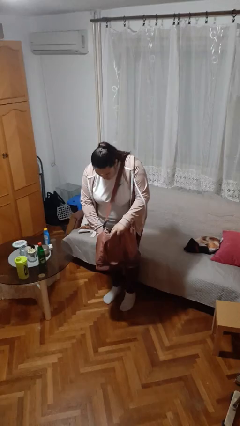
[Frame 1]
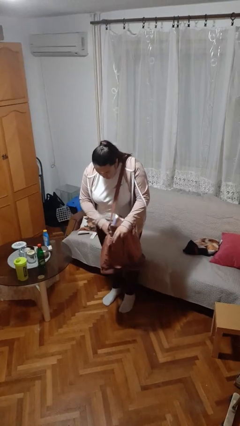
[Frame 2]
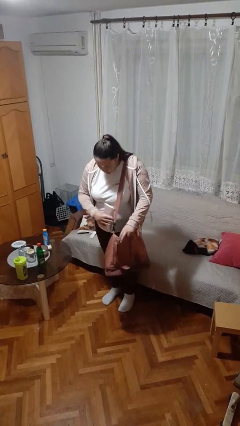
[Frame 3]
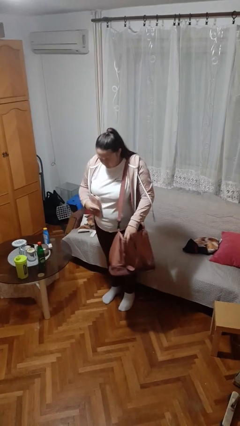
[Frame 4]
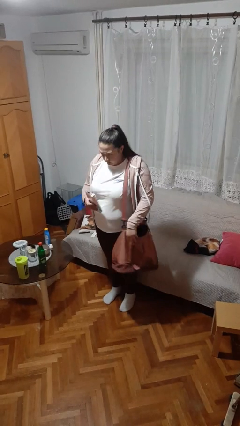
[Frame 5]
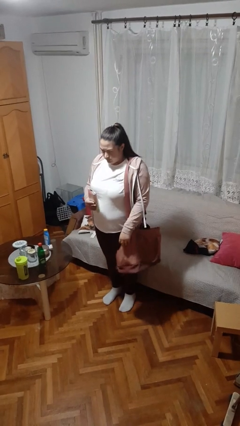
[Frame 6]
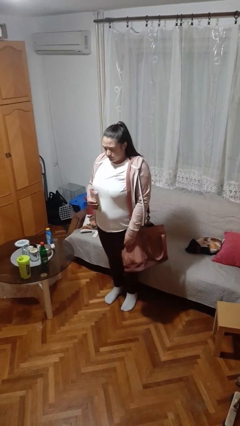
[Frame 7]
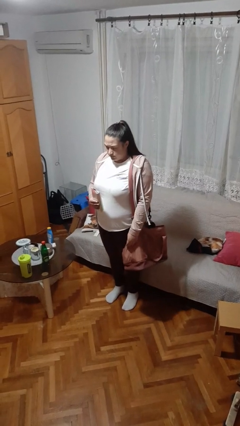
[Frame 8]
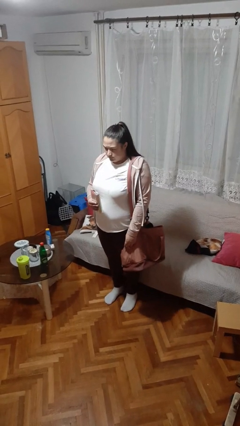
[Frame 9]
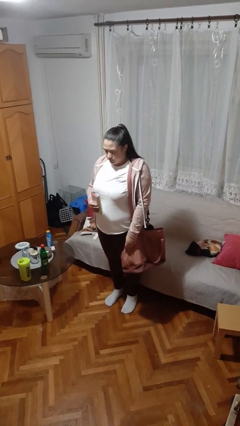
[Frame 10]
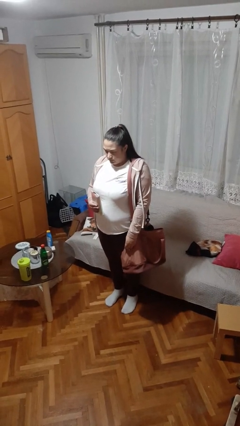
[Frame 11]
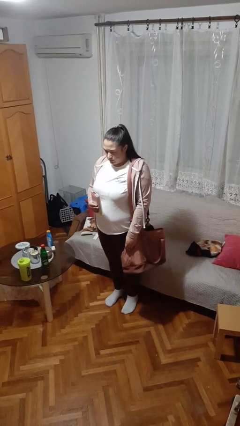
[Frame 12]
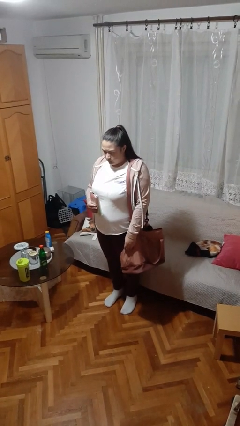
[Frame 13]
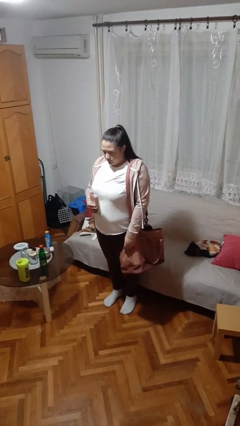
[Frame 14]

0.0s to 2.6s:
person takes object from purse

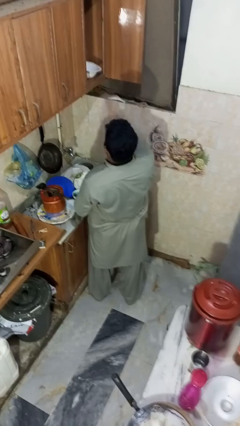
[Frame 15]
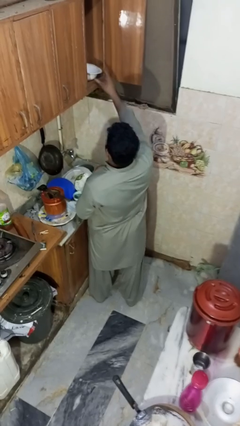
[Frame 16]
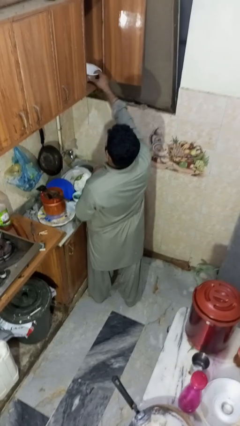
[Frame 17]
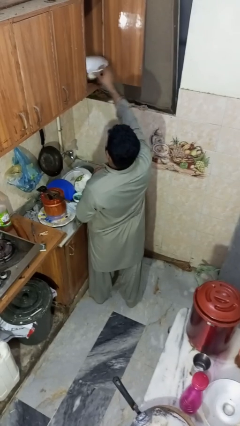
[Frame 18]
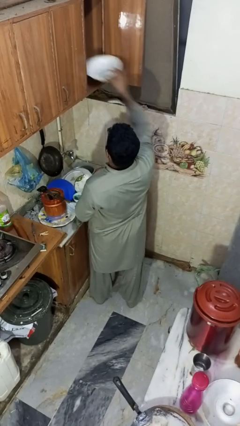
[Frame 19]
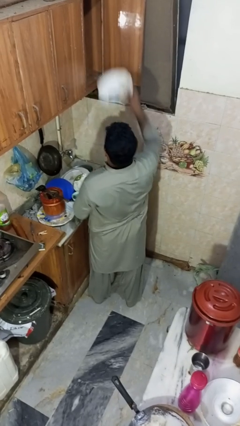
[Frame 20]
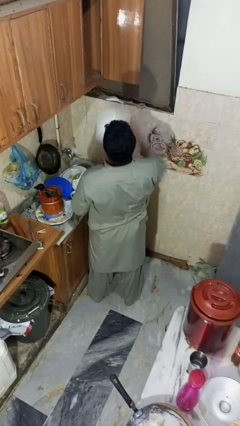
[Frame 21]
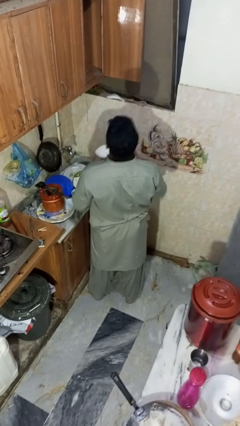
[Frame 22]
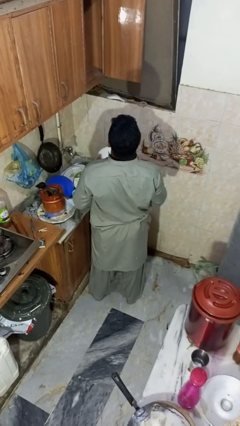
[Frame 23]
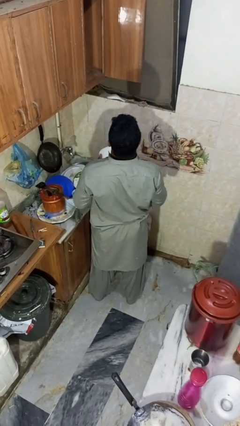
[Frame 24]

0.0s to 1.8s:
person takes object from cabinet

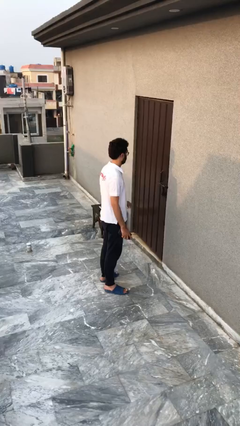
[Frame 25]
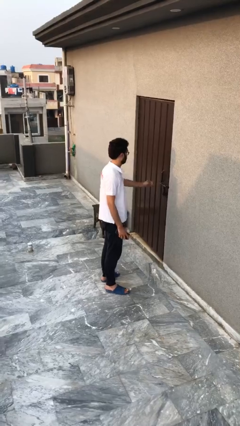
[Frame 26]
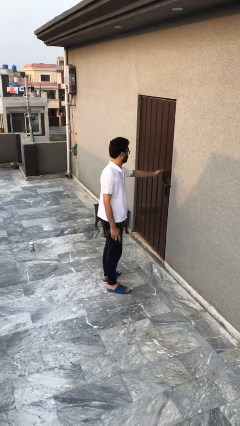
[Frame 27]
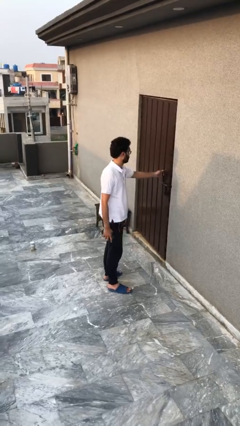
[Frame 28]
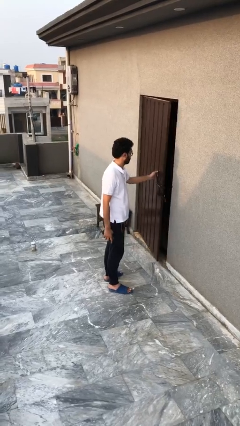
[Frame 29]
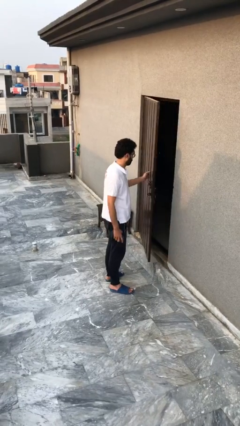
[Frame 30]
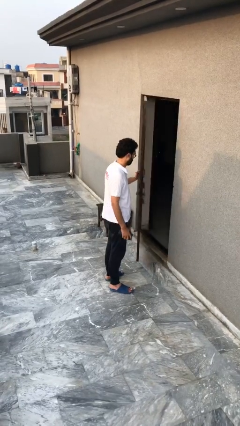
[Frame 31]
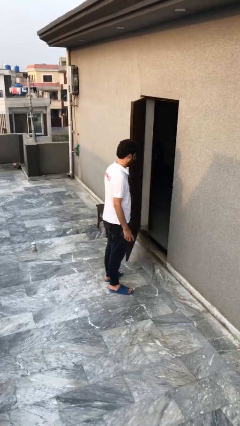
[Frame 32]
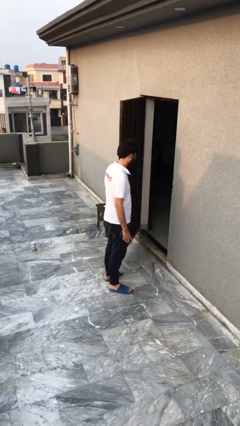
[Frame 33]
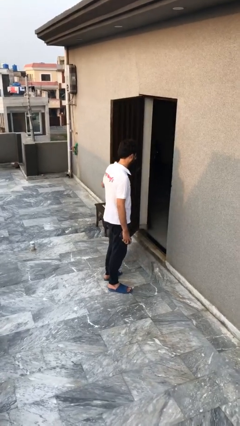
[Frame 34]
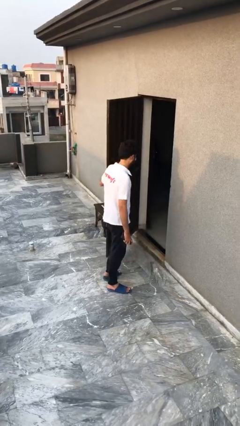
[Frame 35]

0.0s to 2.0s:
person opens facility door

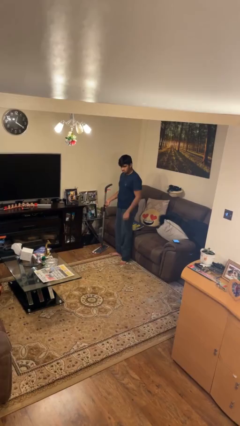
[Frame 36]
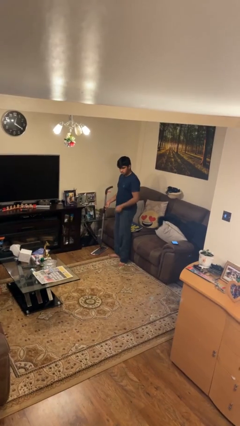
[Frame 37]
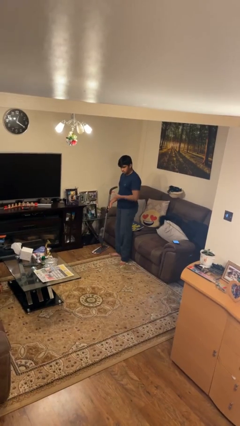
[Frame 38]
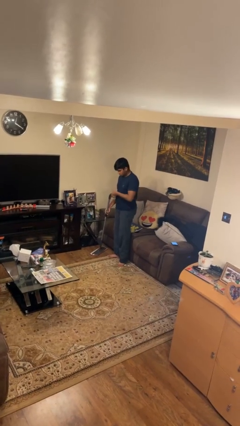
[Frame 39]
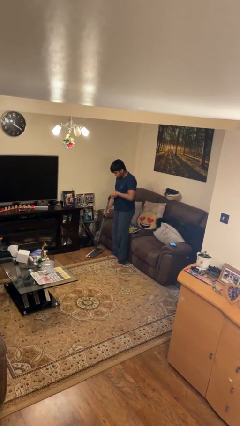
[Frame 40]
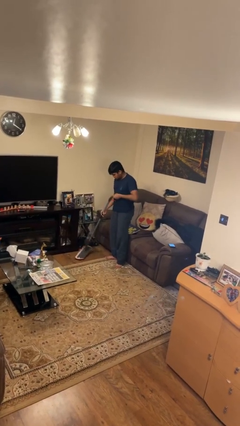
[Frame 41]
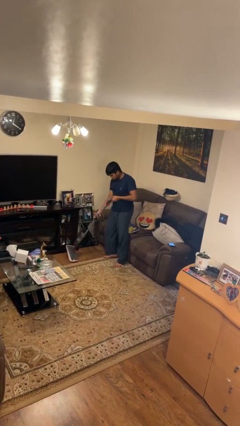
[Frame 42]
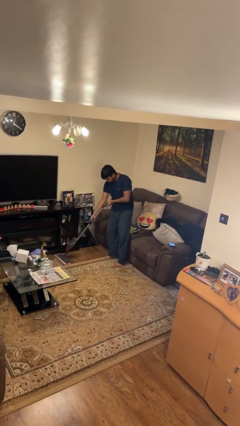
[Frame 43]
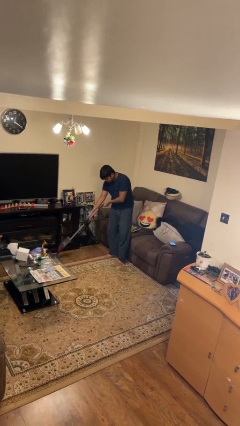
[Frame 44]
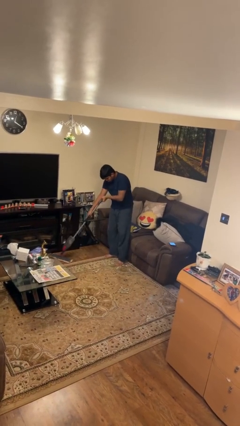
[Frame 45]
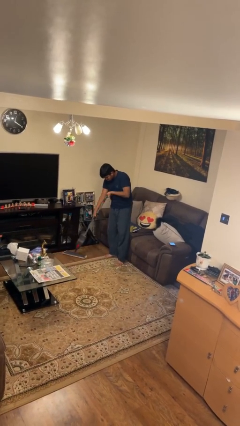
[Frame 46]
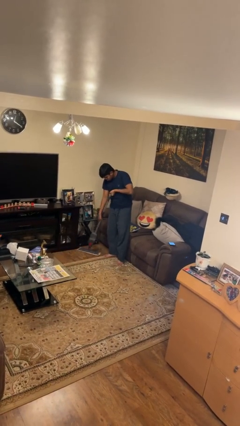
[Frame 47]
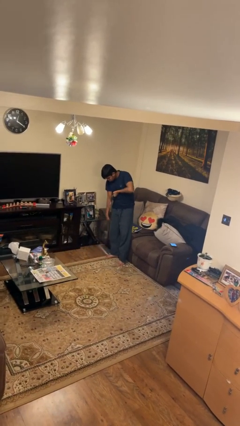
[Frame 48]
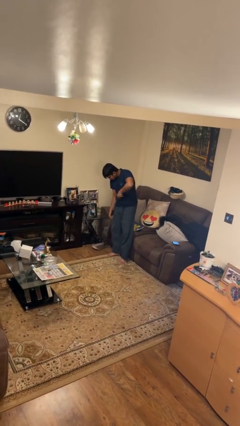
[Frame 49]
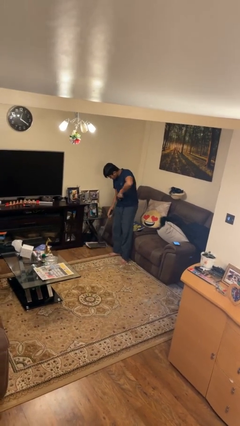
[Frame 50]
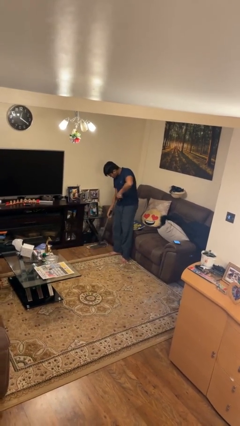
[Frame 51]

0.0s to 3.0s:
person mops

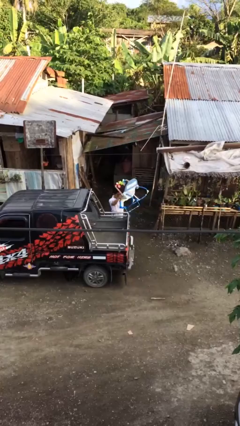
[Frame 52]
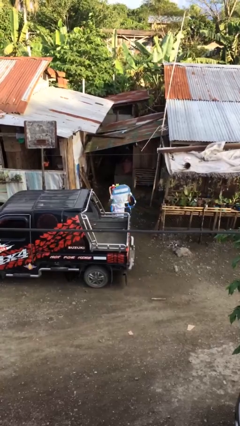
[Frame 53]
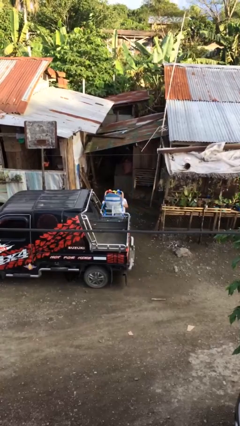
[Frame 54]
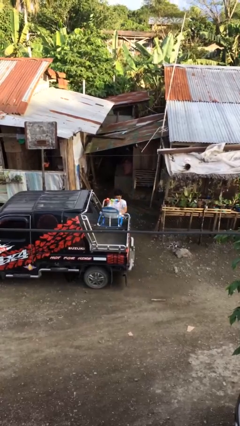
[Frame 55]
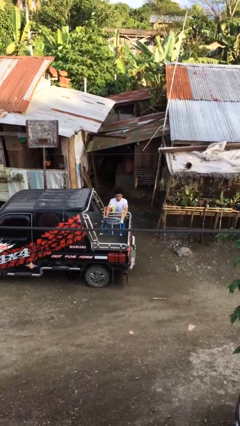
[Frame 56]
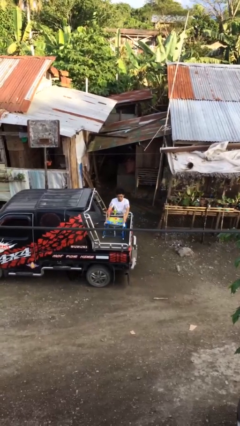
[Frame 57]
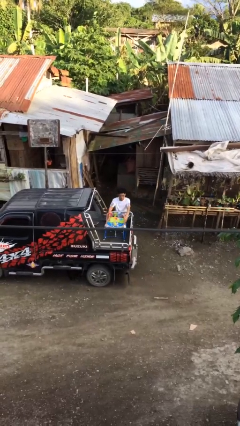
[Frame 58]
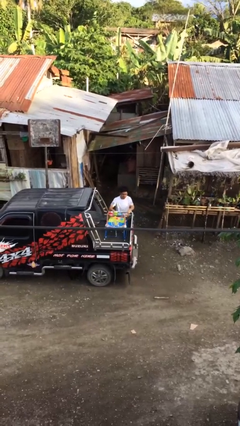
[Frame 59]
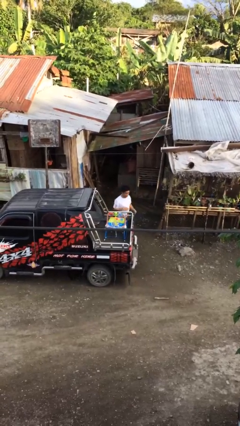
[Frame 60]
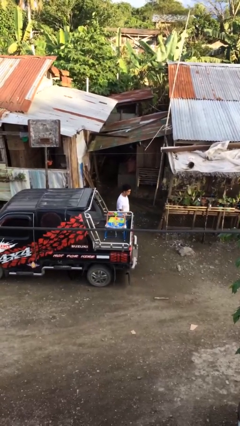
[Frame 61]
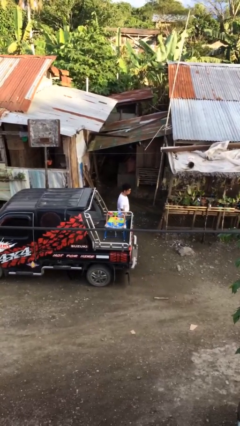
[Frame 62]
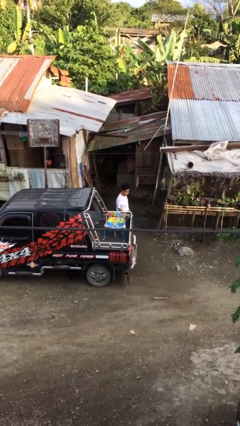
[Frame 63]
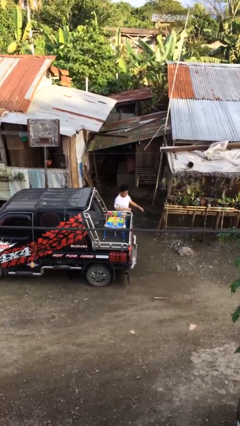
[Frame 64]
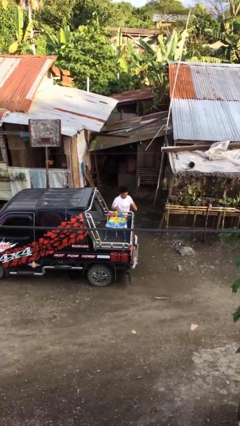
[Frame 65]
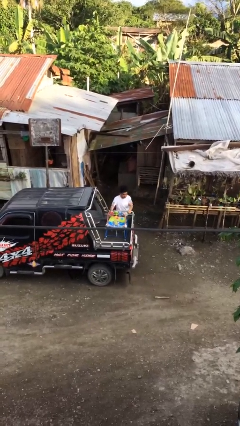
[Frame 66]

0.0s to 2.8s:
person loads car

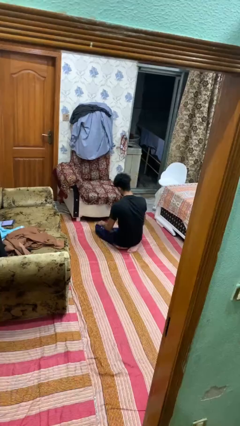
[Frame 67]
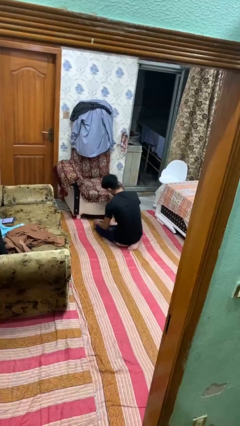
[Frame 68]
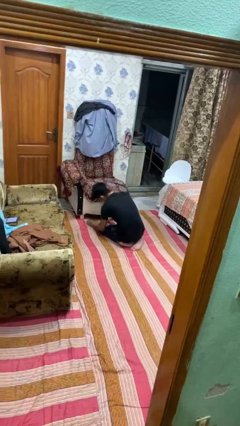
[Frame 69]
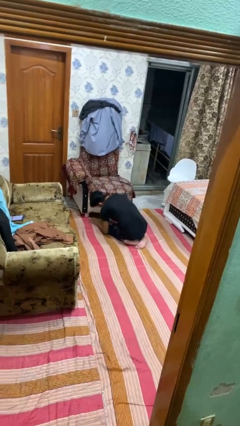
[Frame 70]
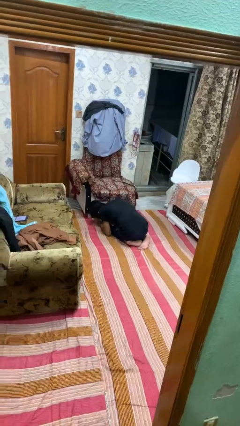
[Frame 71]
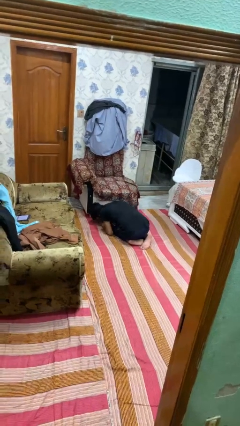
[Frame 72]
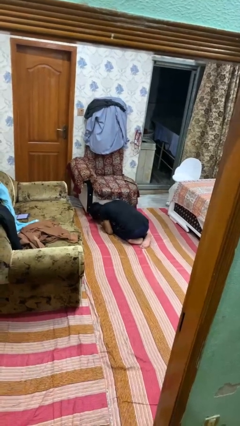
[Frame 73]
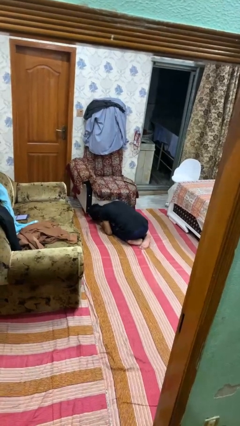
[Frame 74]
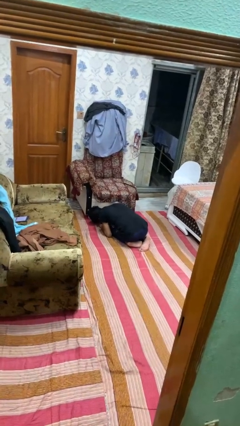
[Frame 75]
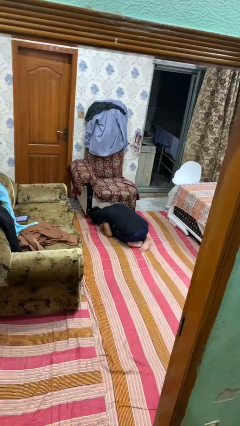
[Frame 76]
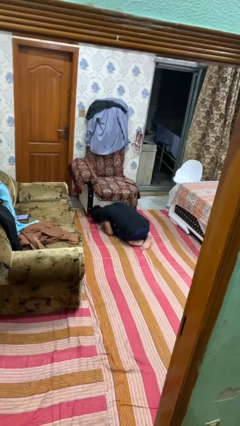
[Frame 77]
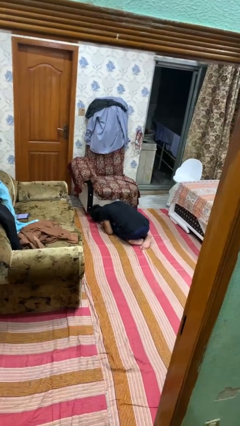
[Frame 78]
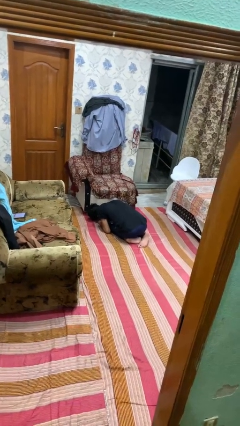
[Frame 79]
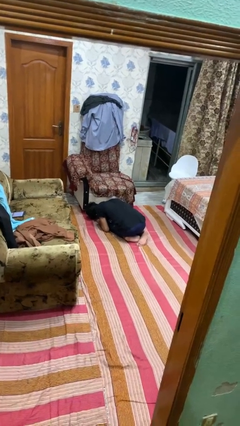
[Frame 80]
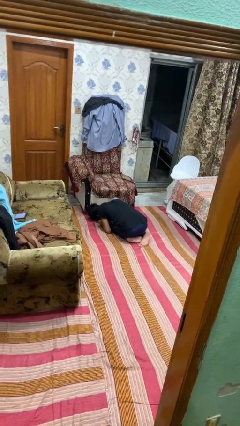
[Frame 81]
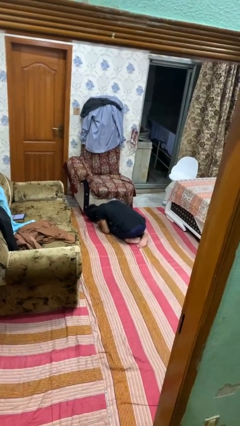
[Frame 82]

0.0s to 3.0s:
person searches under couch

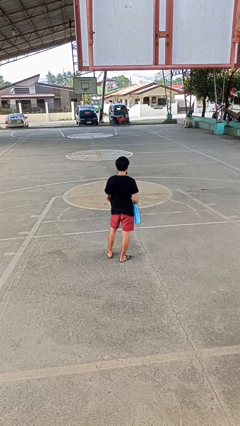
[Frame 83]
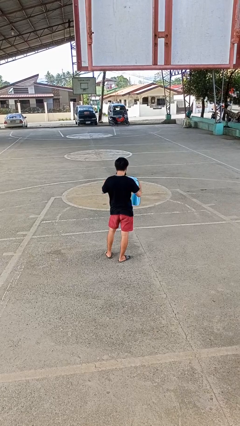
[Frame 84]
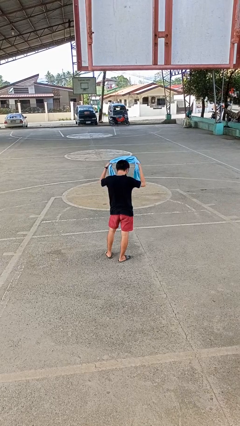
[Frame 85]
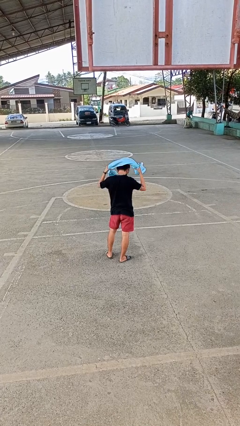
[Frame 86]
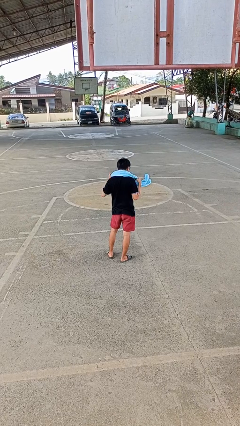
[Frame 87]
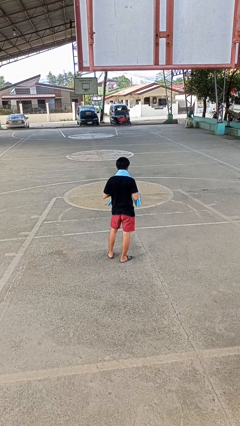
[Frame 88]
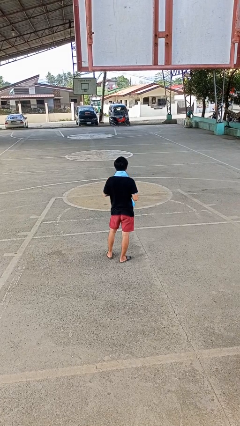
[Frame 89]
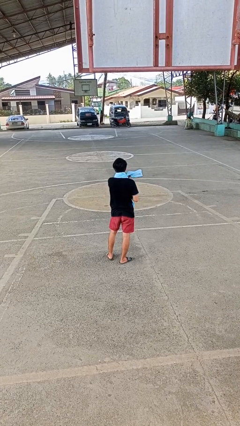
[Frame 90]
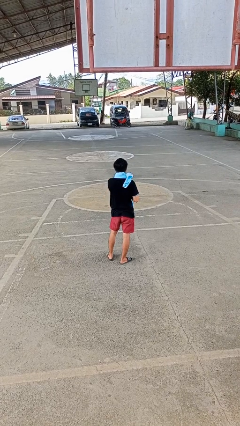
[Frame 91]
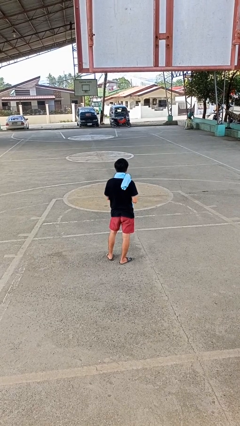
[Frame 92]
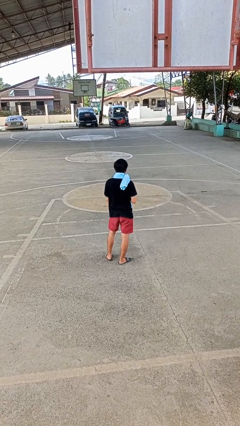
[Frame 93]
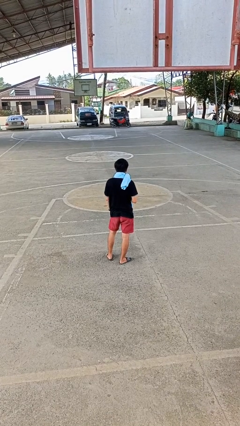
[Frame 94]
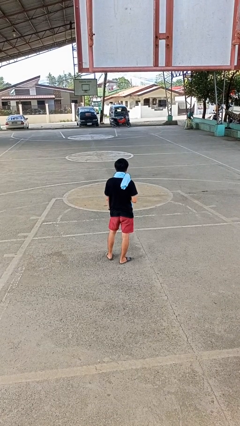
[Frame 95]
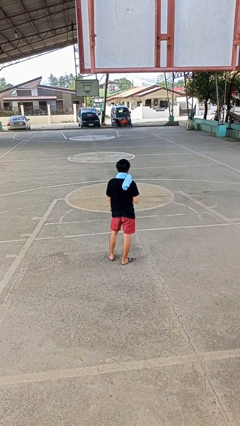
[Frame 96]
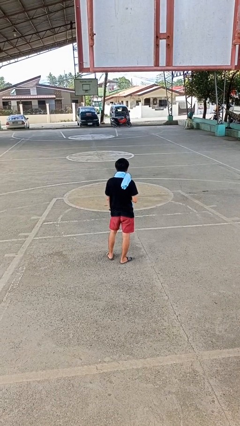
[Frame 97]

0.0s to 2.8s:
person puts on scarf
